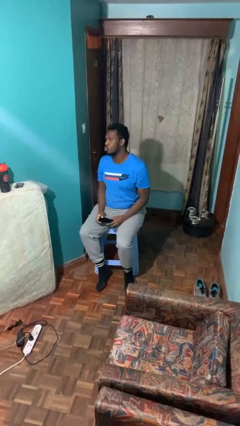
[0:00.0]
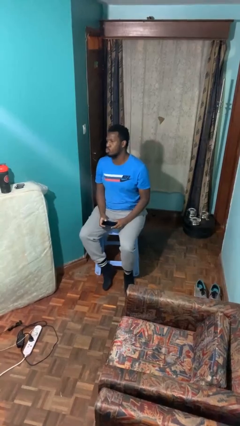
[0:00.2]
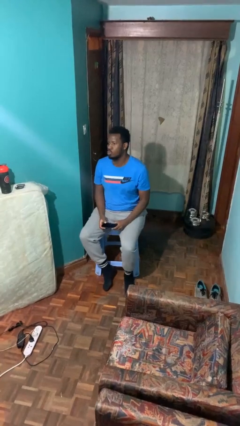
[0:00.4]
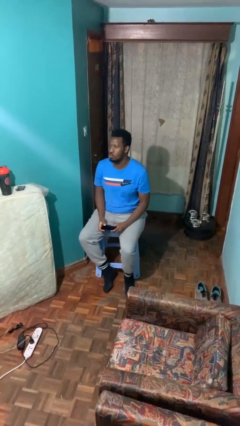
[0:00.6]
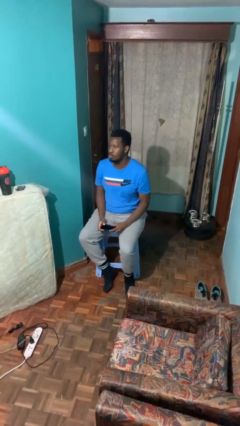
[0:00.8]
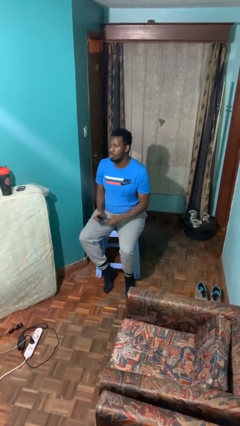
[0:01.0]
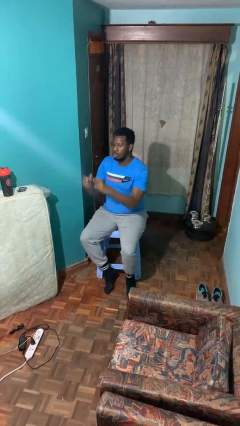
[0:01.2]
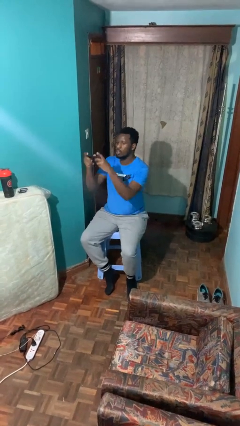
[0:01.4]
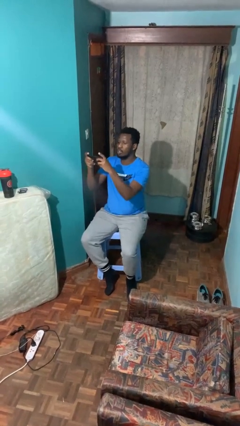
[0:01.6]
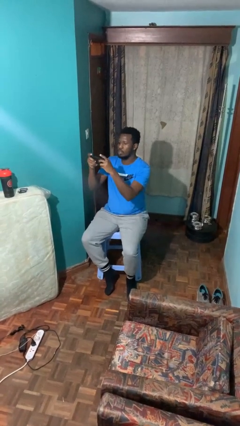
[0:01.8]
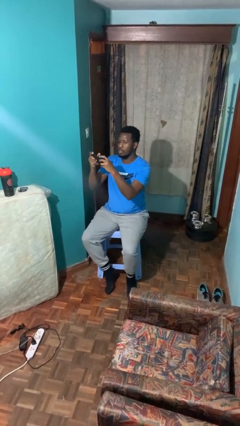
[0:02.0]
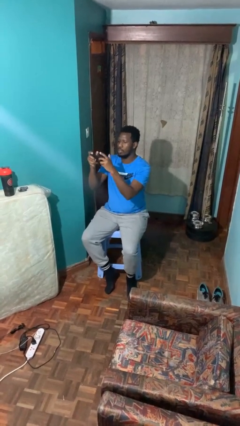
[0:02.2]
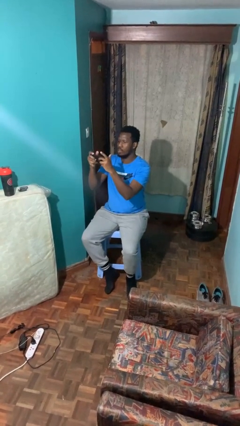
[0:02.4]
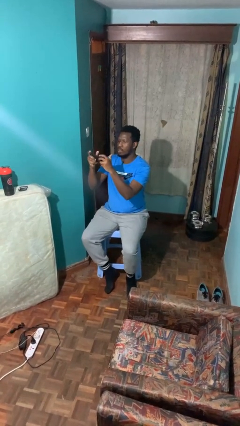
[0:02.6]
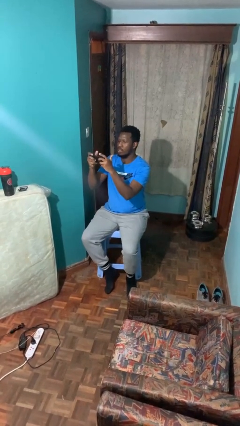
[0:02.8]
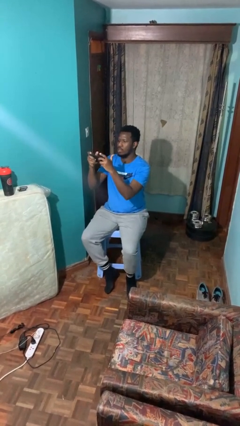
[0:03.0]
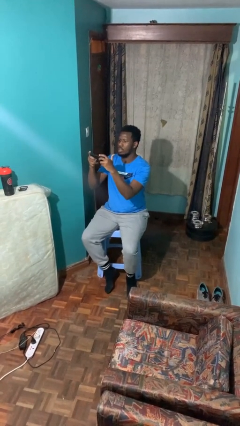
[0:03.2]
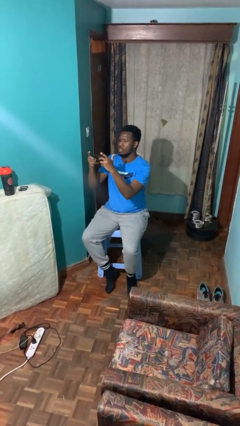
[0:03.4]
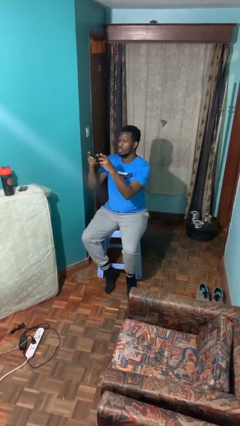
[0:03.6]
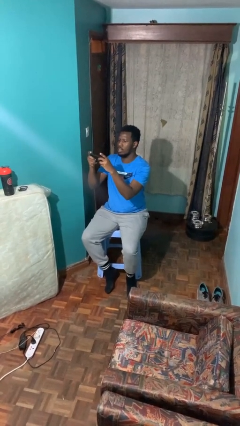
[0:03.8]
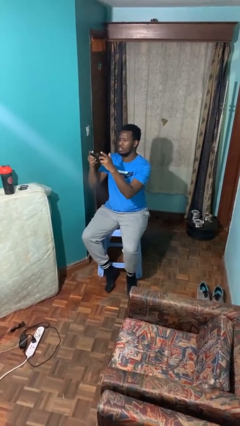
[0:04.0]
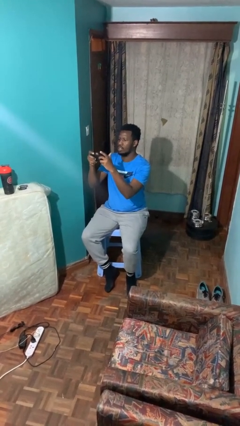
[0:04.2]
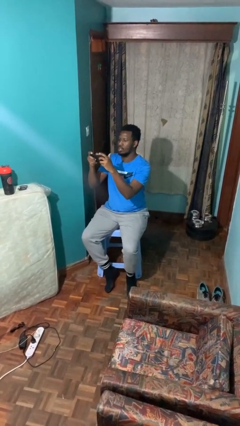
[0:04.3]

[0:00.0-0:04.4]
person interacts with handheld game

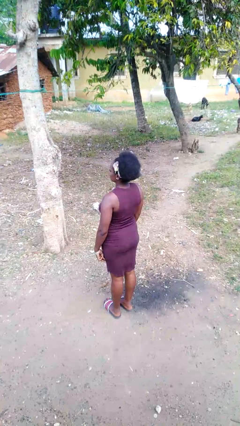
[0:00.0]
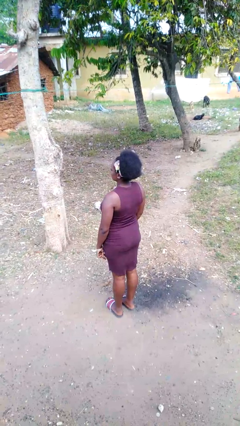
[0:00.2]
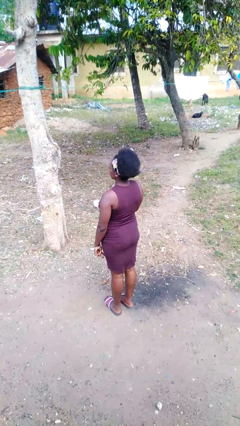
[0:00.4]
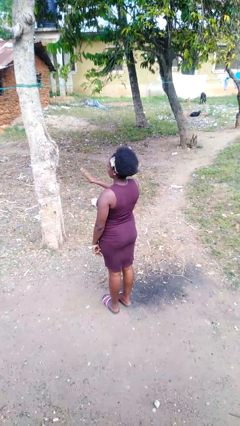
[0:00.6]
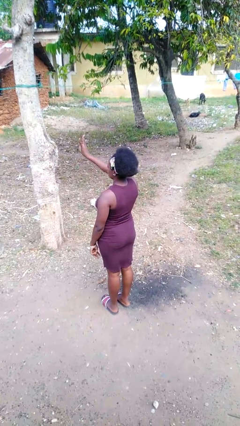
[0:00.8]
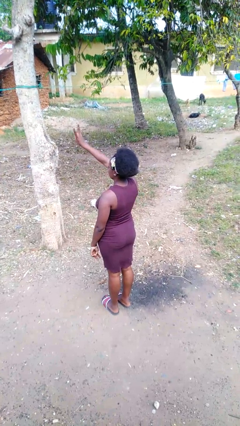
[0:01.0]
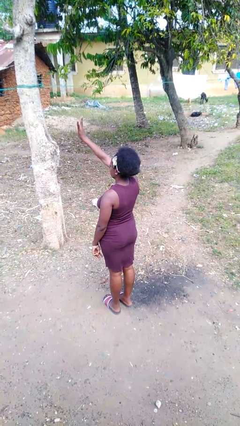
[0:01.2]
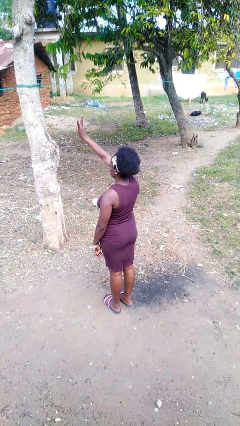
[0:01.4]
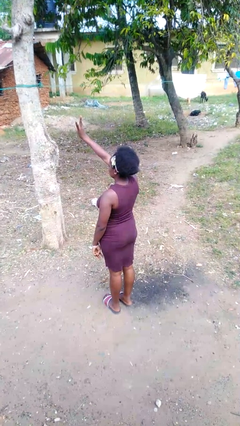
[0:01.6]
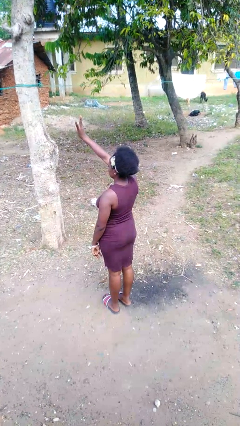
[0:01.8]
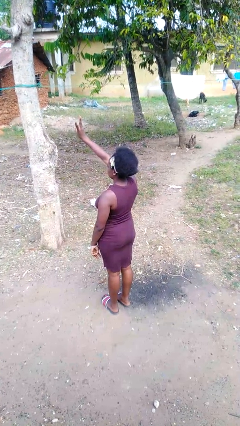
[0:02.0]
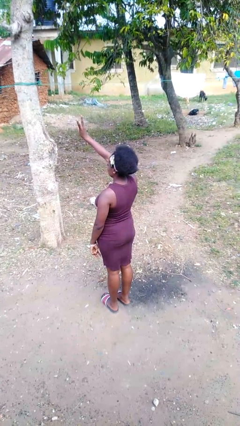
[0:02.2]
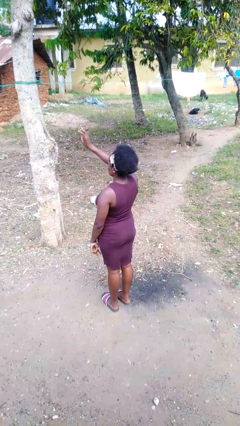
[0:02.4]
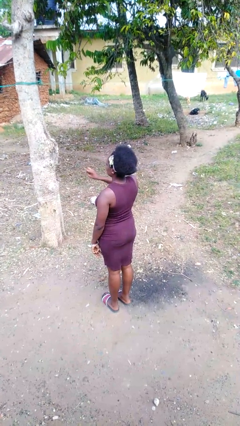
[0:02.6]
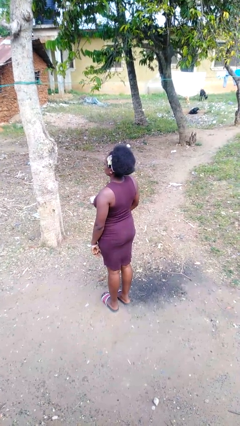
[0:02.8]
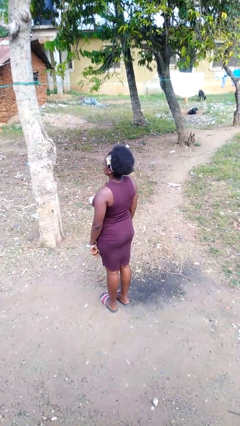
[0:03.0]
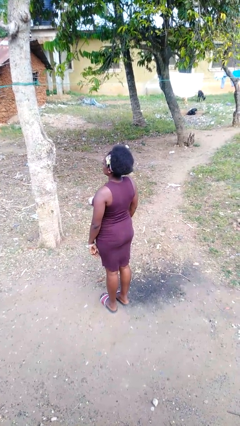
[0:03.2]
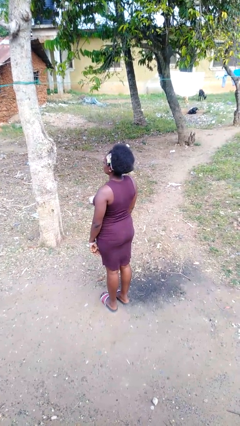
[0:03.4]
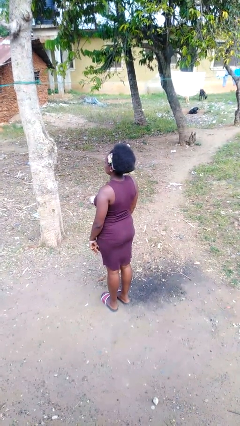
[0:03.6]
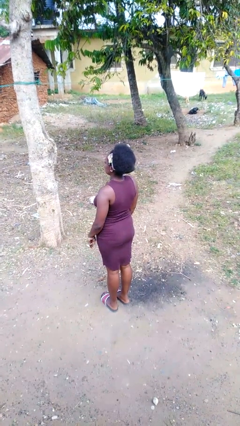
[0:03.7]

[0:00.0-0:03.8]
person gestures number three

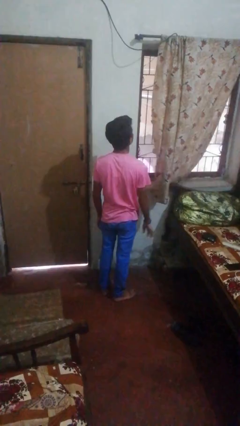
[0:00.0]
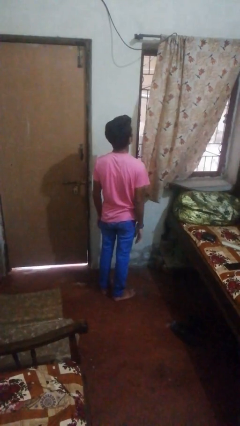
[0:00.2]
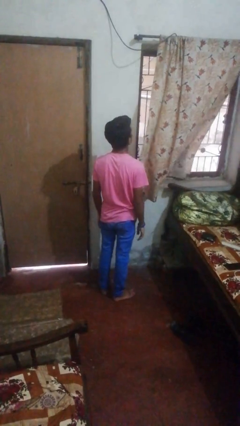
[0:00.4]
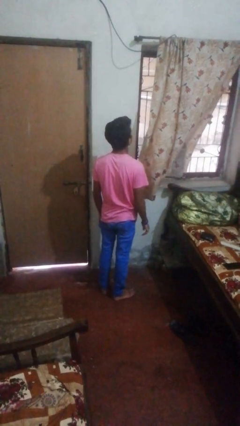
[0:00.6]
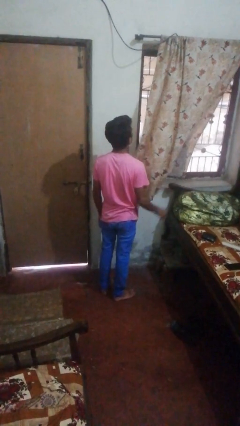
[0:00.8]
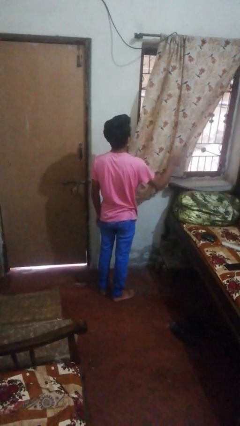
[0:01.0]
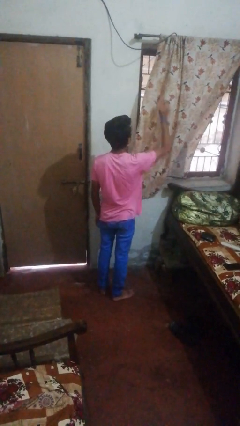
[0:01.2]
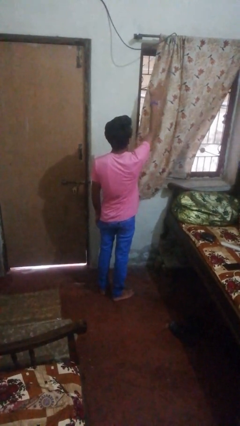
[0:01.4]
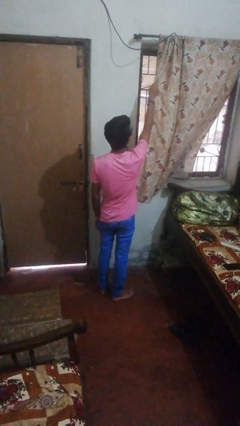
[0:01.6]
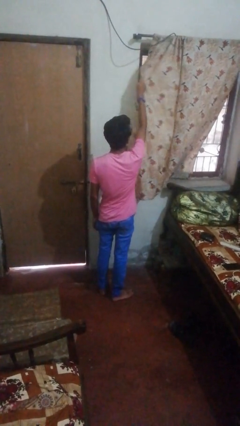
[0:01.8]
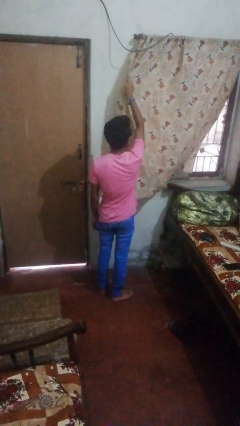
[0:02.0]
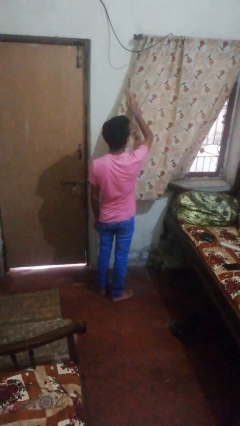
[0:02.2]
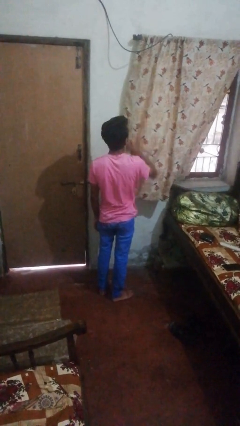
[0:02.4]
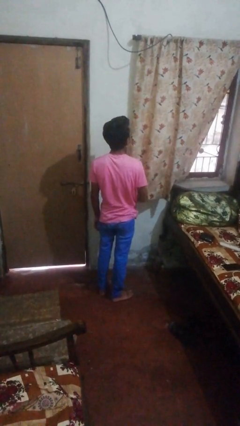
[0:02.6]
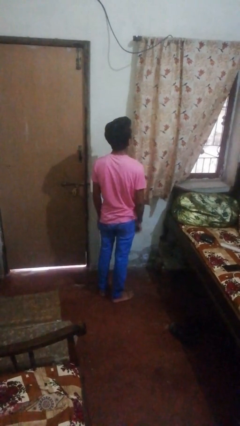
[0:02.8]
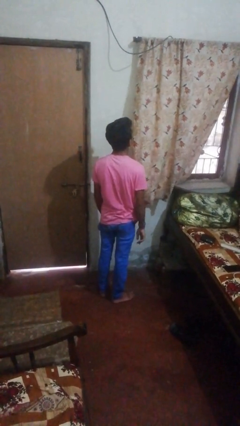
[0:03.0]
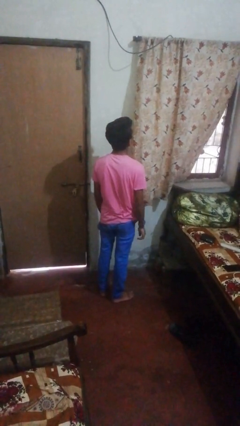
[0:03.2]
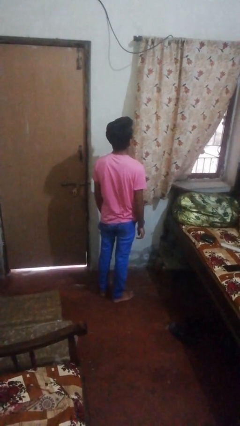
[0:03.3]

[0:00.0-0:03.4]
person closes curtains

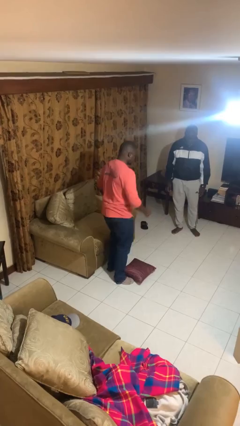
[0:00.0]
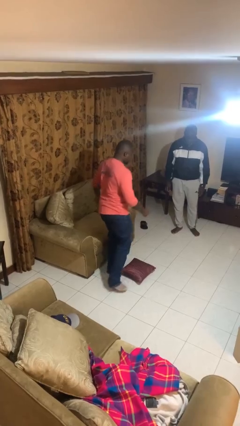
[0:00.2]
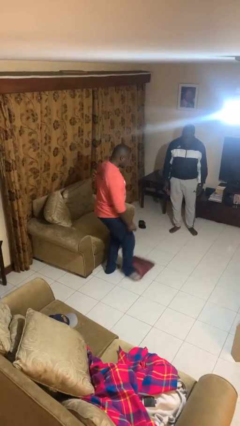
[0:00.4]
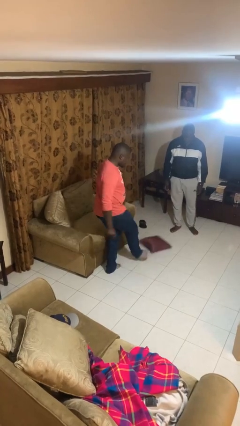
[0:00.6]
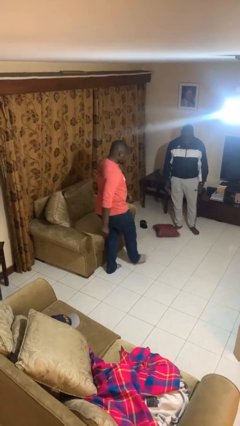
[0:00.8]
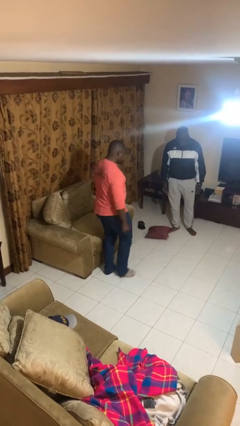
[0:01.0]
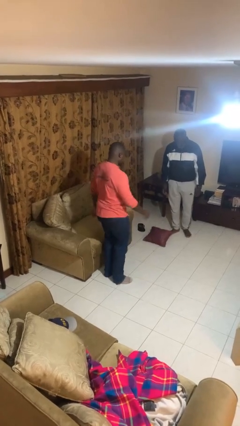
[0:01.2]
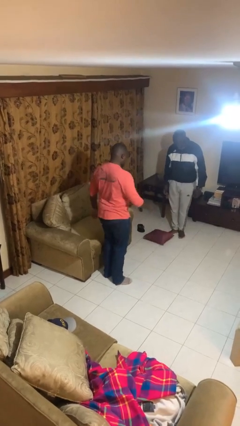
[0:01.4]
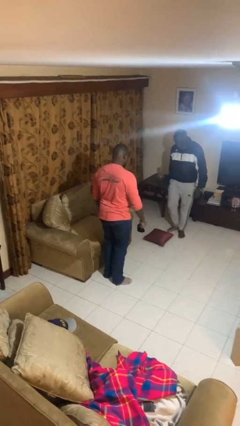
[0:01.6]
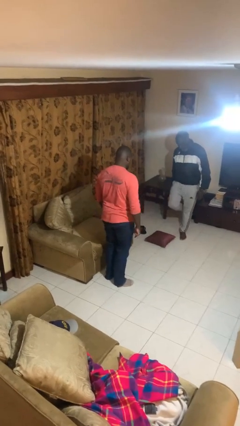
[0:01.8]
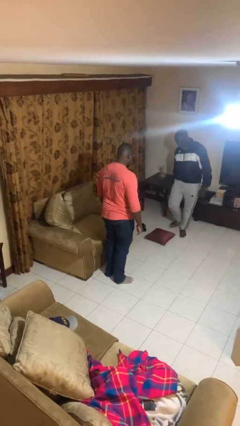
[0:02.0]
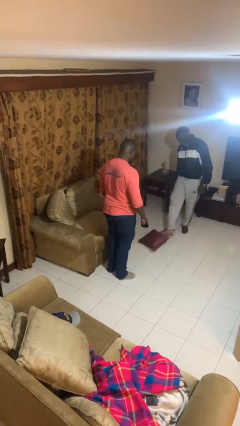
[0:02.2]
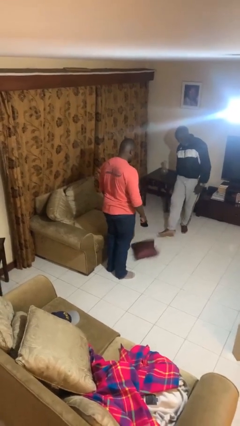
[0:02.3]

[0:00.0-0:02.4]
person kicks object to person

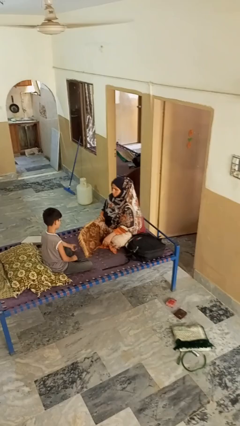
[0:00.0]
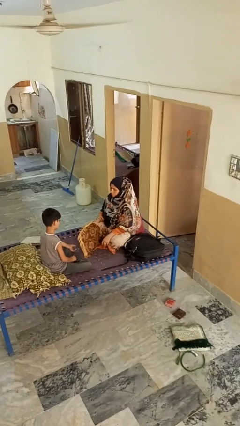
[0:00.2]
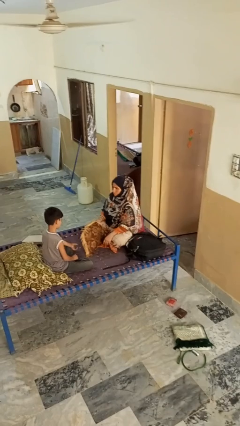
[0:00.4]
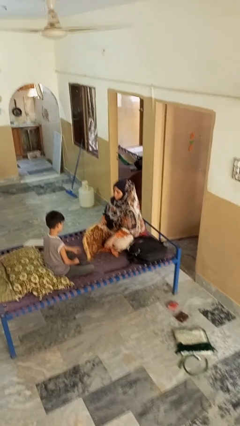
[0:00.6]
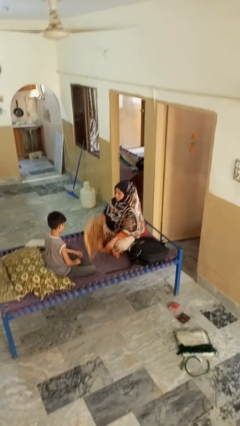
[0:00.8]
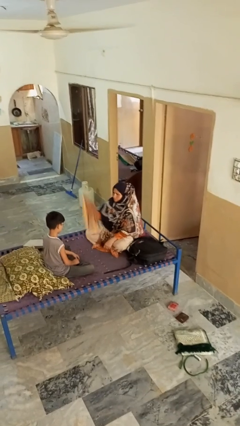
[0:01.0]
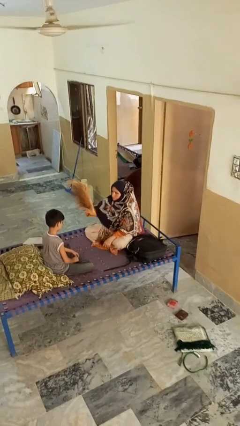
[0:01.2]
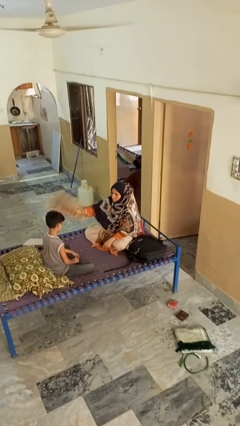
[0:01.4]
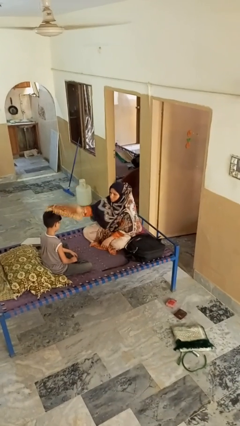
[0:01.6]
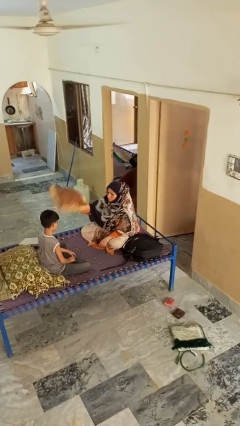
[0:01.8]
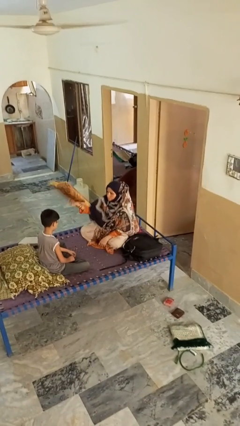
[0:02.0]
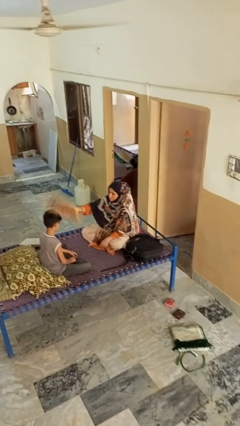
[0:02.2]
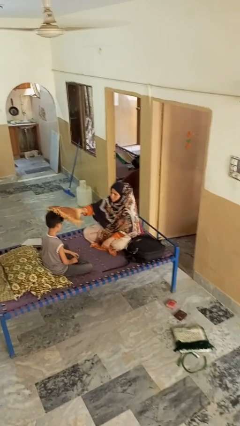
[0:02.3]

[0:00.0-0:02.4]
person hits person with pillow

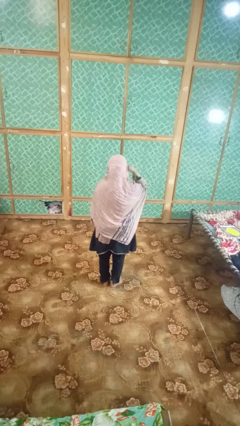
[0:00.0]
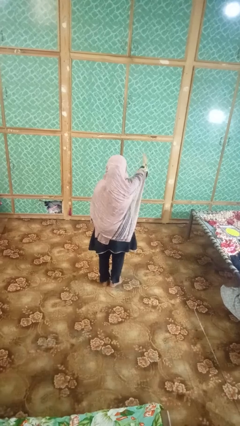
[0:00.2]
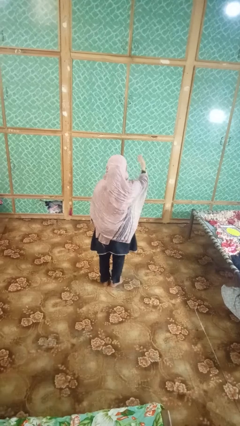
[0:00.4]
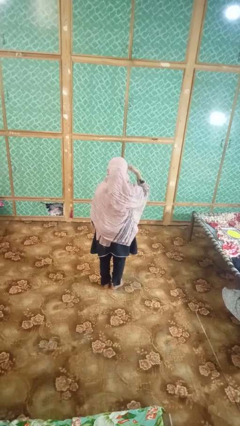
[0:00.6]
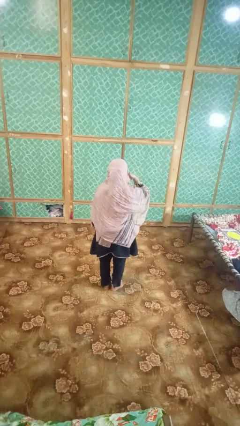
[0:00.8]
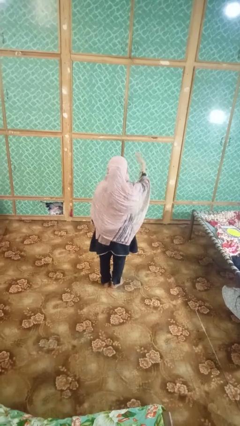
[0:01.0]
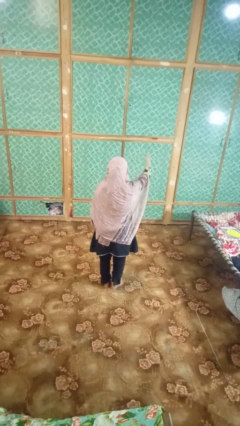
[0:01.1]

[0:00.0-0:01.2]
person gestures blow kiss
